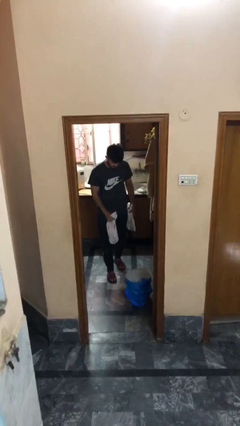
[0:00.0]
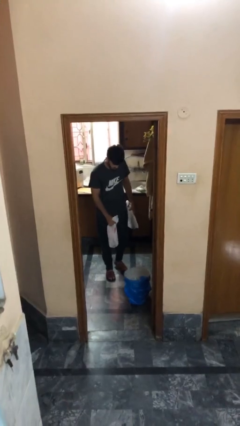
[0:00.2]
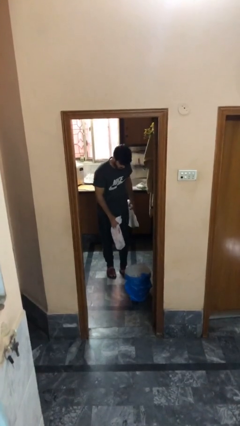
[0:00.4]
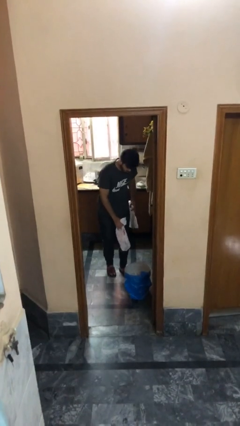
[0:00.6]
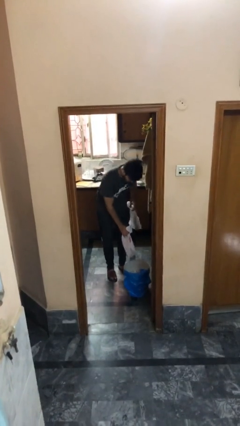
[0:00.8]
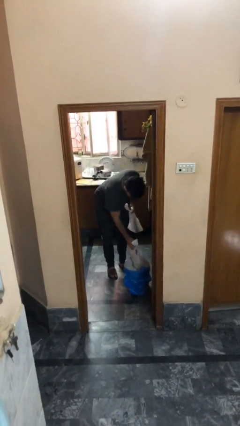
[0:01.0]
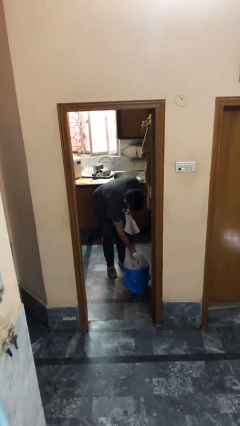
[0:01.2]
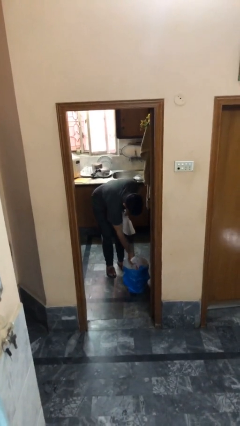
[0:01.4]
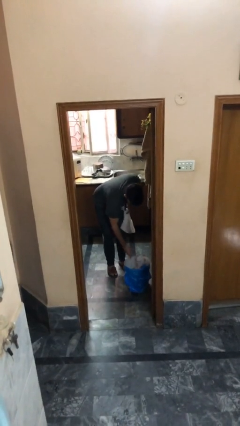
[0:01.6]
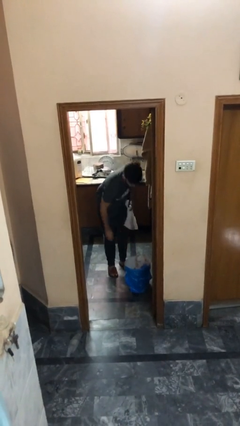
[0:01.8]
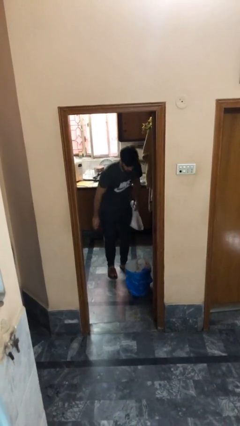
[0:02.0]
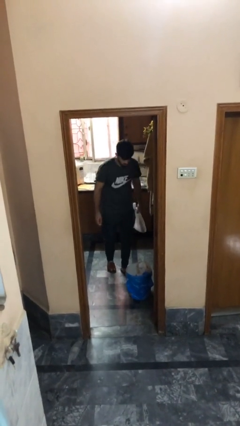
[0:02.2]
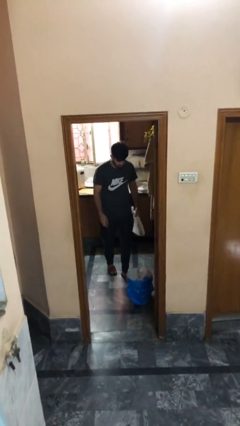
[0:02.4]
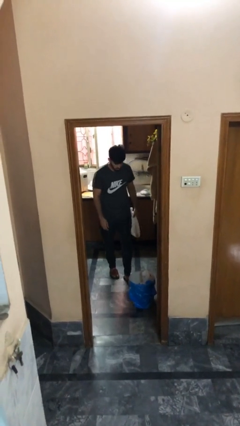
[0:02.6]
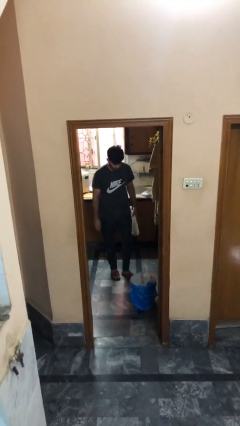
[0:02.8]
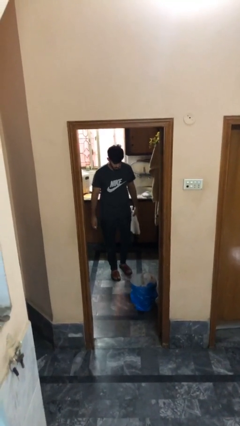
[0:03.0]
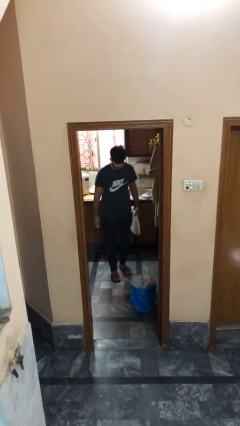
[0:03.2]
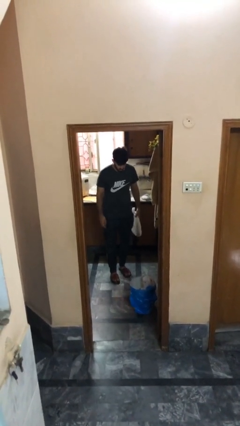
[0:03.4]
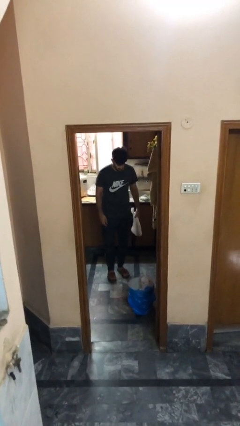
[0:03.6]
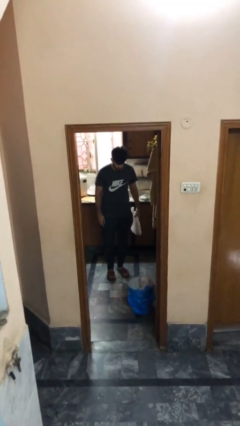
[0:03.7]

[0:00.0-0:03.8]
person discards trash

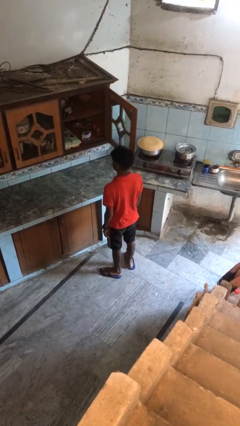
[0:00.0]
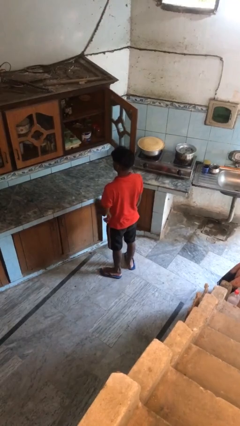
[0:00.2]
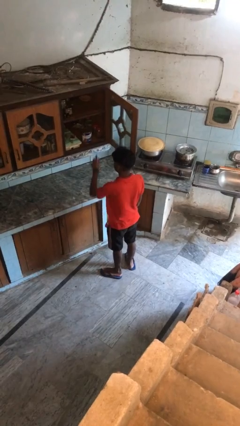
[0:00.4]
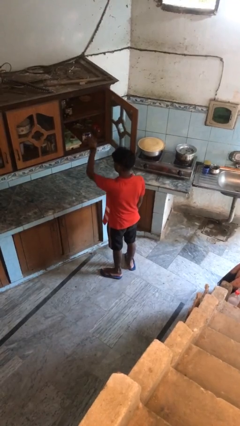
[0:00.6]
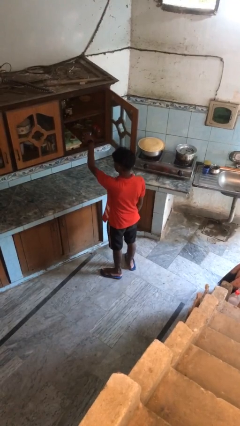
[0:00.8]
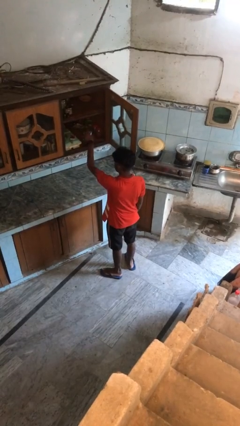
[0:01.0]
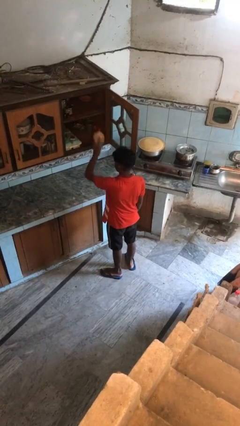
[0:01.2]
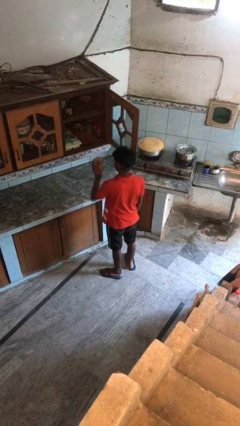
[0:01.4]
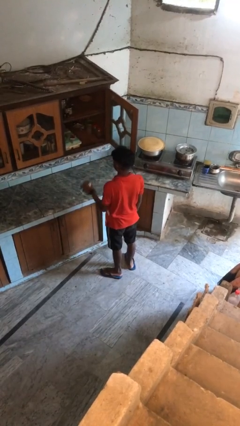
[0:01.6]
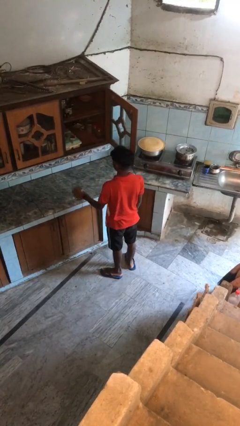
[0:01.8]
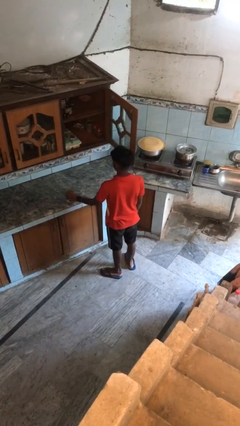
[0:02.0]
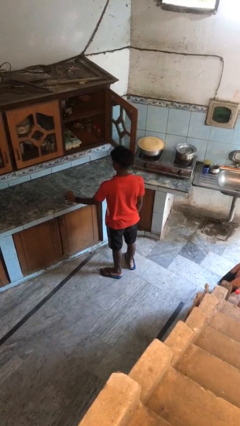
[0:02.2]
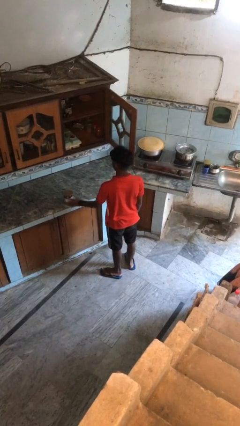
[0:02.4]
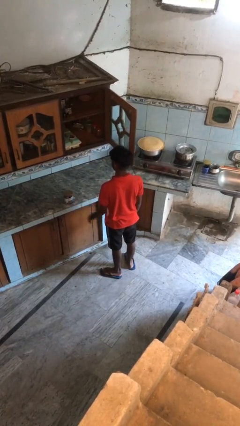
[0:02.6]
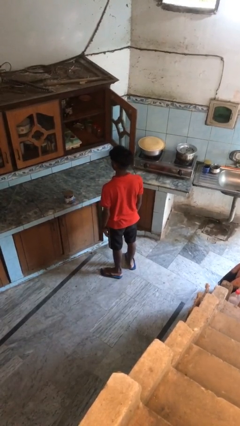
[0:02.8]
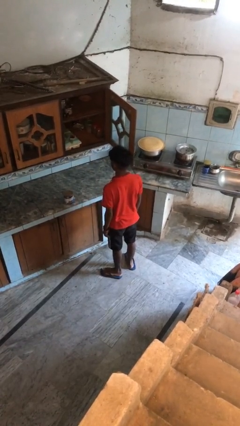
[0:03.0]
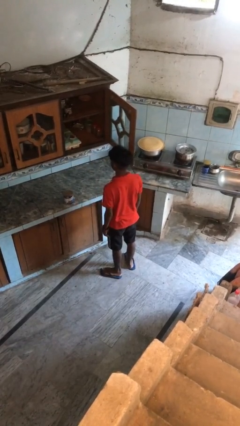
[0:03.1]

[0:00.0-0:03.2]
person takes object from cabinet

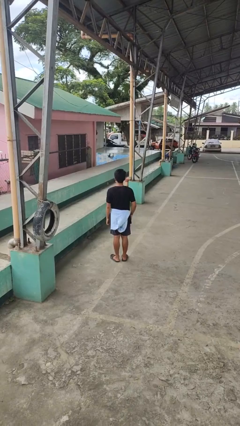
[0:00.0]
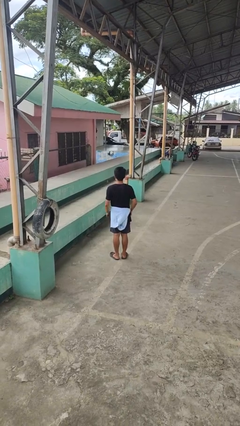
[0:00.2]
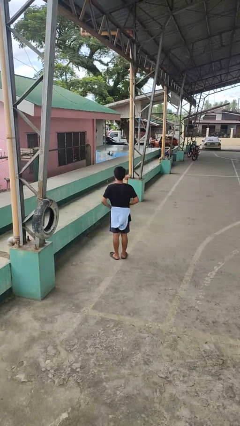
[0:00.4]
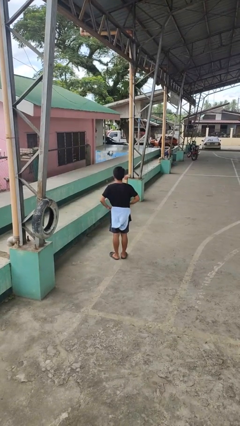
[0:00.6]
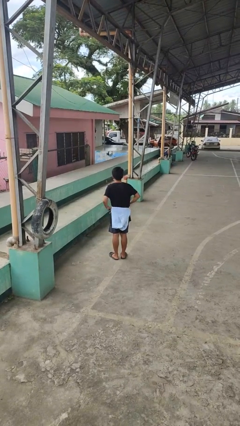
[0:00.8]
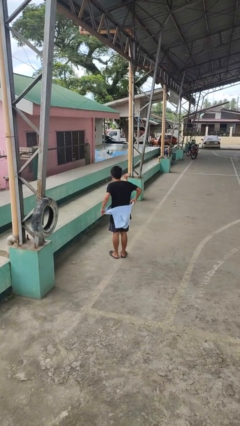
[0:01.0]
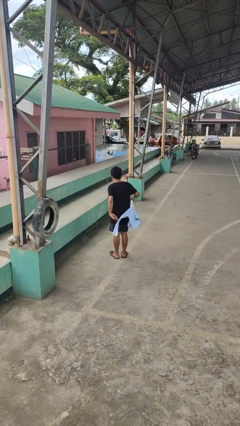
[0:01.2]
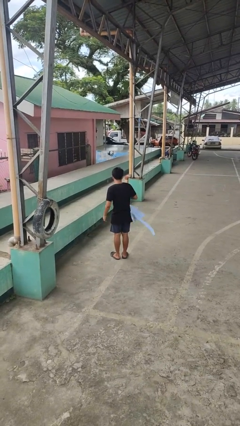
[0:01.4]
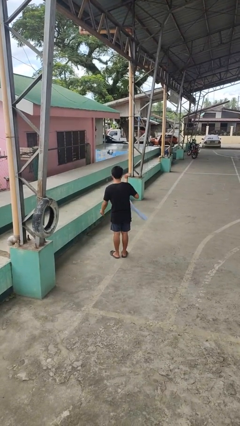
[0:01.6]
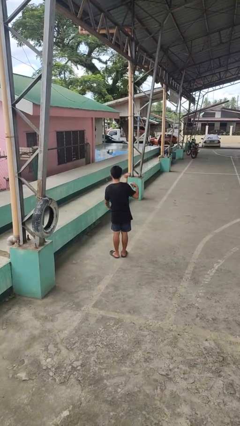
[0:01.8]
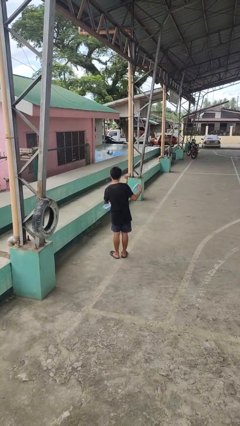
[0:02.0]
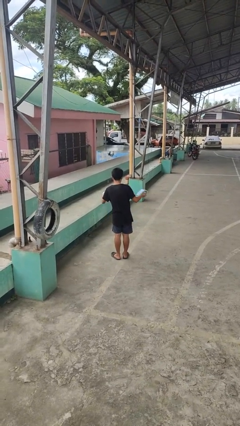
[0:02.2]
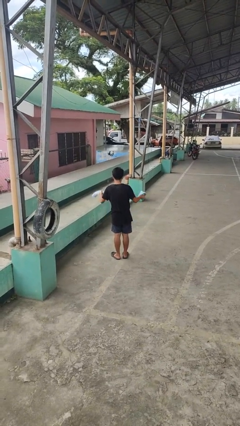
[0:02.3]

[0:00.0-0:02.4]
person unties jacket around waist

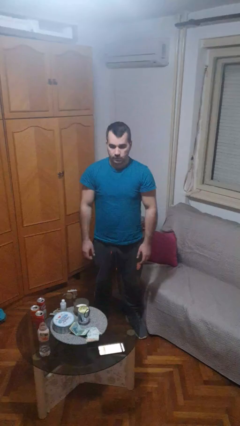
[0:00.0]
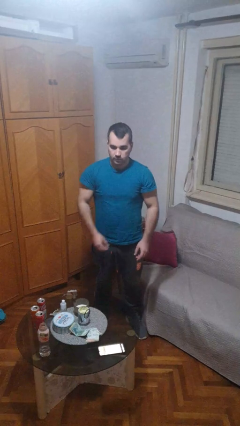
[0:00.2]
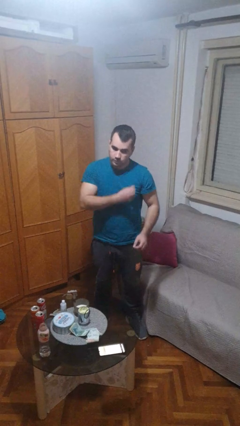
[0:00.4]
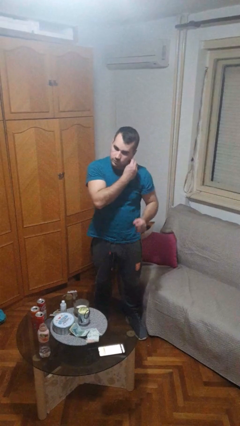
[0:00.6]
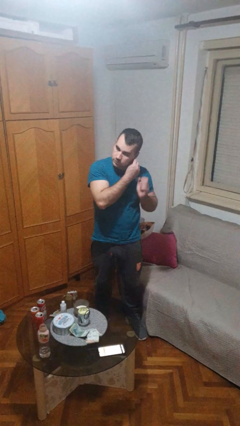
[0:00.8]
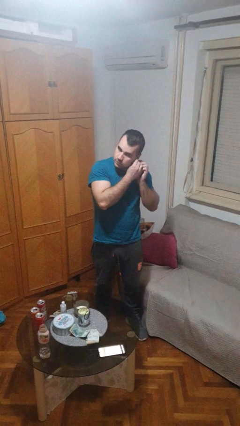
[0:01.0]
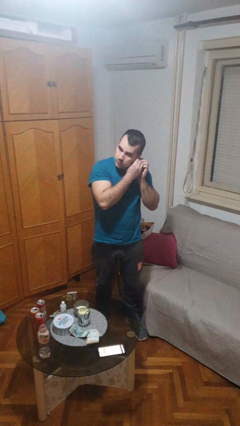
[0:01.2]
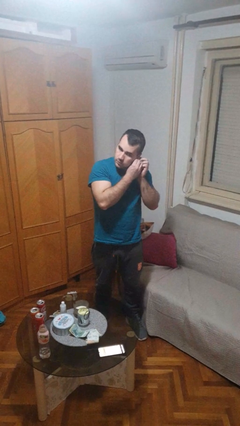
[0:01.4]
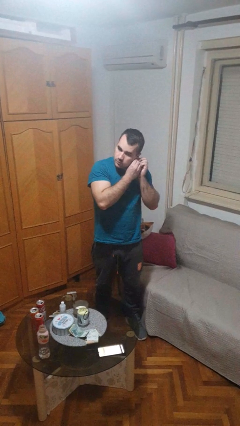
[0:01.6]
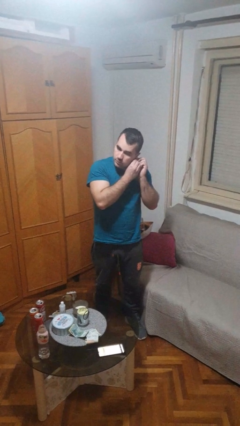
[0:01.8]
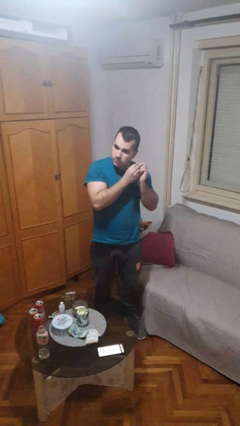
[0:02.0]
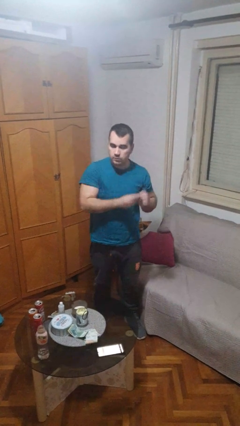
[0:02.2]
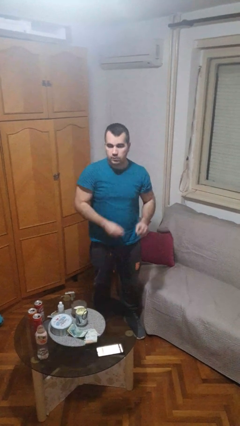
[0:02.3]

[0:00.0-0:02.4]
person puts on earrings

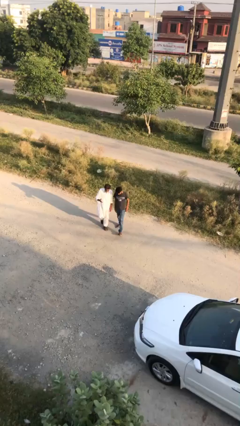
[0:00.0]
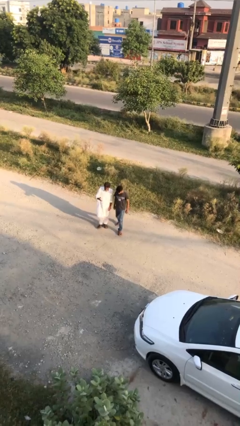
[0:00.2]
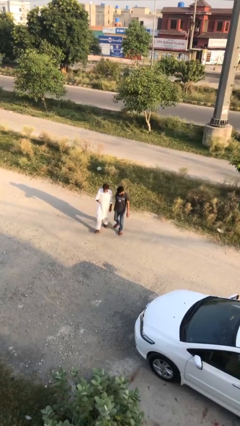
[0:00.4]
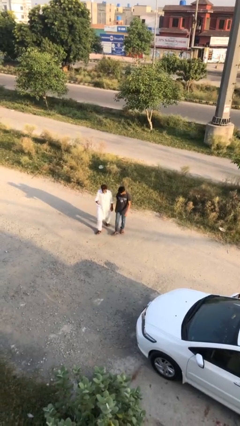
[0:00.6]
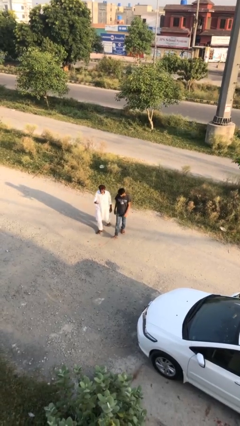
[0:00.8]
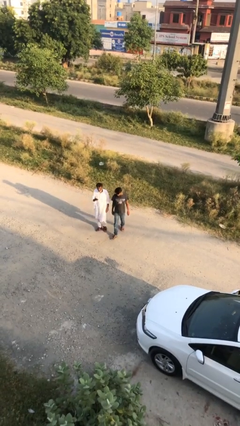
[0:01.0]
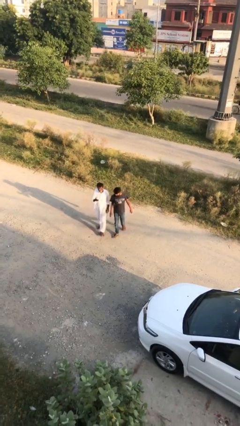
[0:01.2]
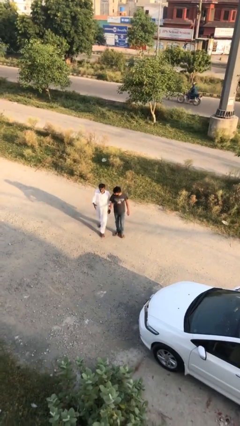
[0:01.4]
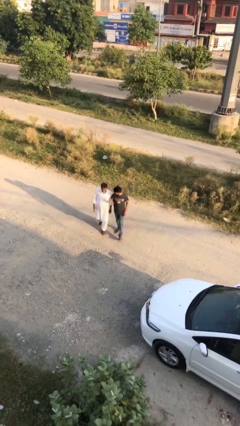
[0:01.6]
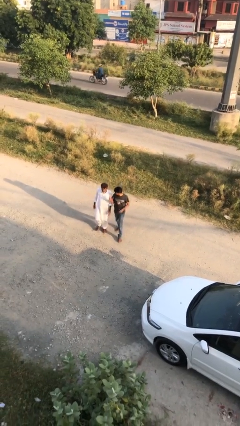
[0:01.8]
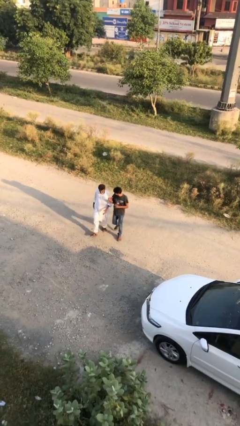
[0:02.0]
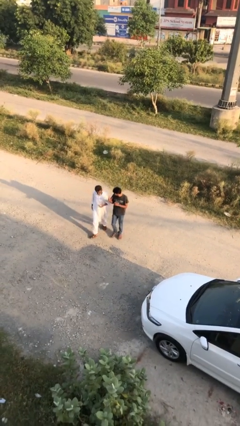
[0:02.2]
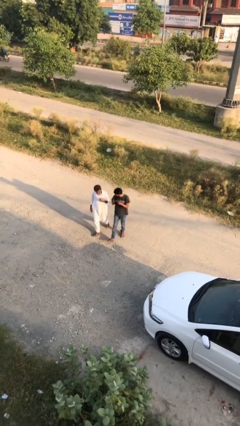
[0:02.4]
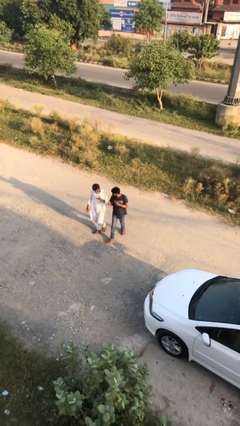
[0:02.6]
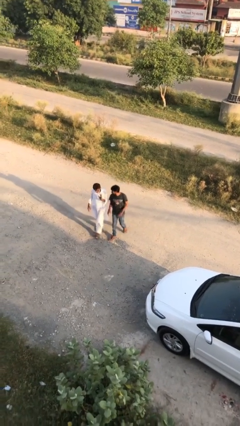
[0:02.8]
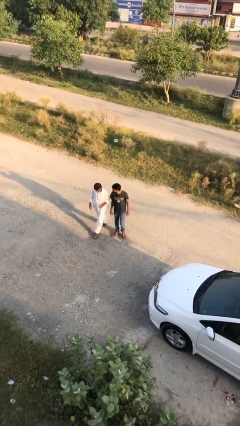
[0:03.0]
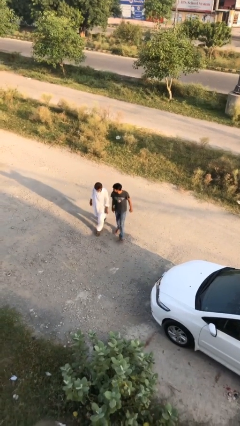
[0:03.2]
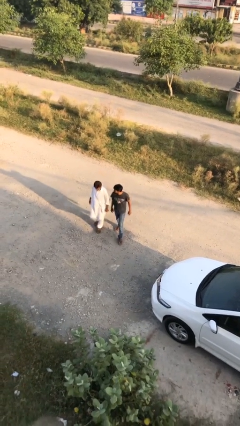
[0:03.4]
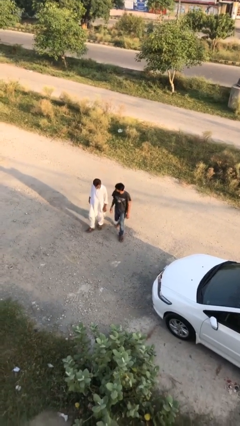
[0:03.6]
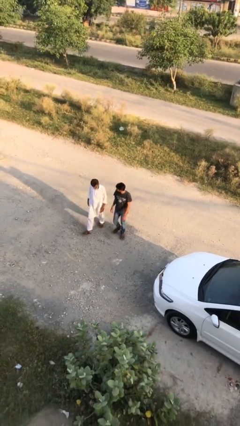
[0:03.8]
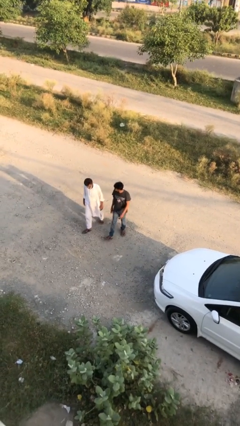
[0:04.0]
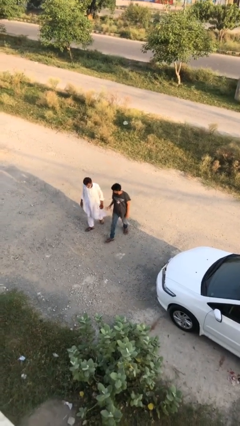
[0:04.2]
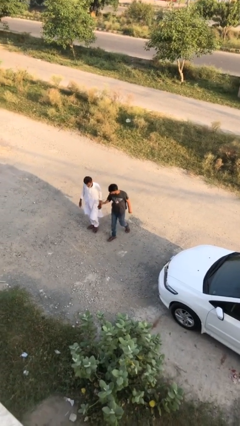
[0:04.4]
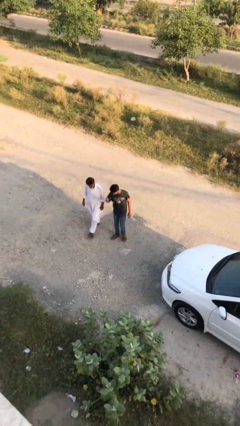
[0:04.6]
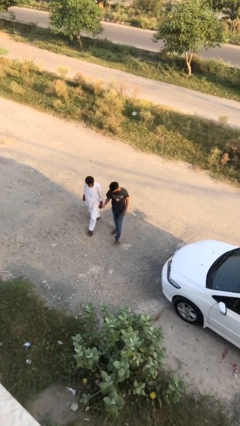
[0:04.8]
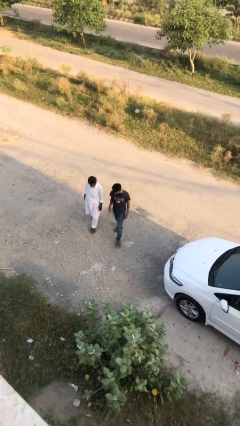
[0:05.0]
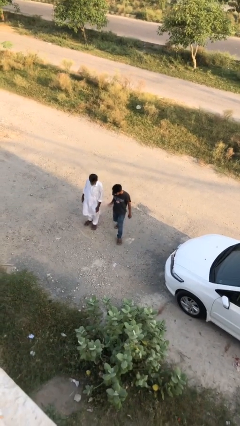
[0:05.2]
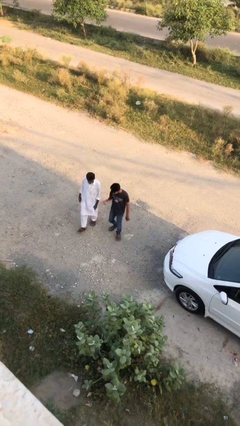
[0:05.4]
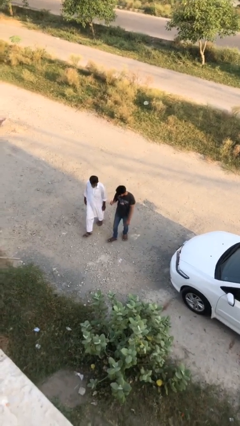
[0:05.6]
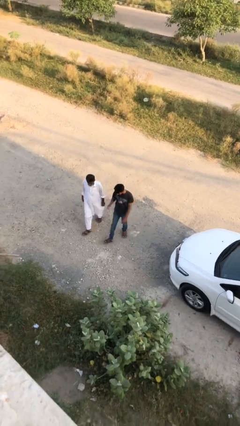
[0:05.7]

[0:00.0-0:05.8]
person talks to person
